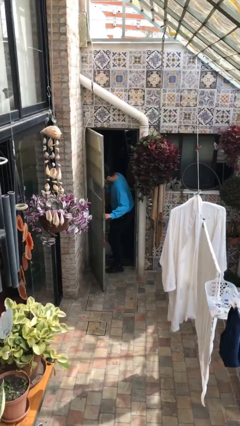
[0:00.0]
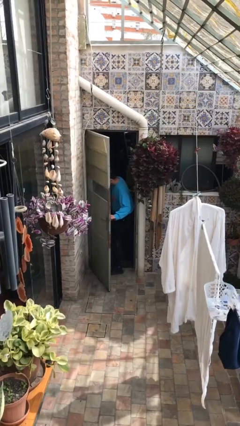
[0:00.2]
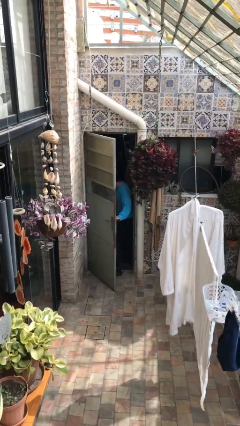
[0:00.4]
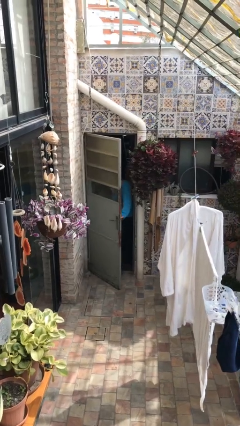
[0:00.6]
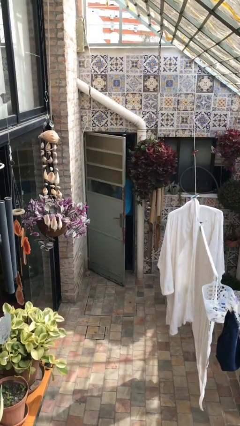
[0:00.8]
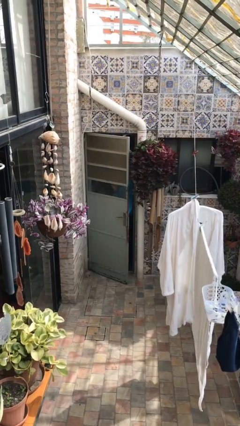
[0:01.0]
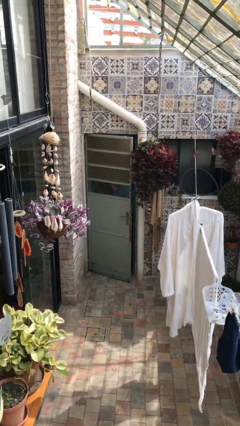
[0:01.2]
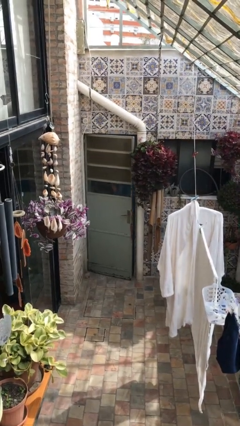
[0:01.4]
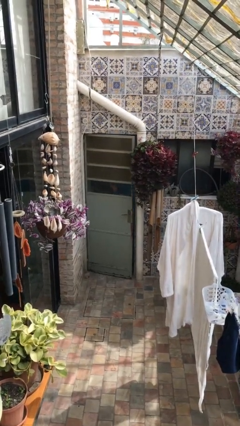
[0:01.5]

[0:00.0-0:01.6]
person closes facility door

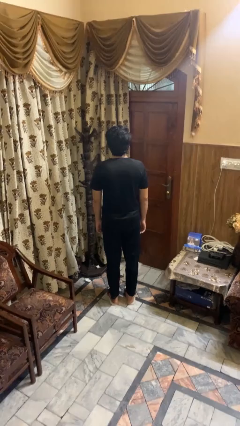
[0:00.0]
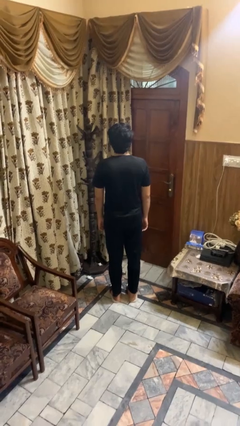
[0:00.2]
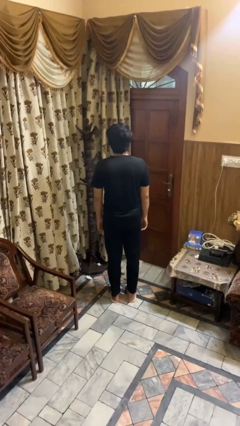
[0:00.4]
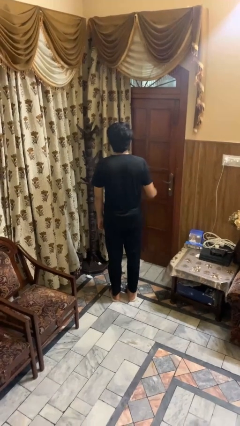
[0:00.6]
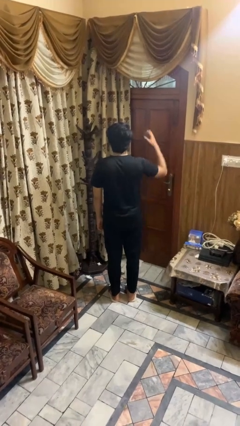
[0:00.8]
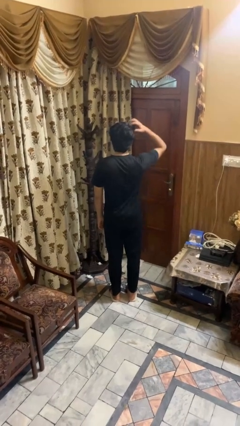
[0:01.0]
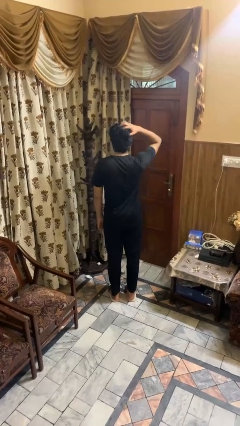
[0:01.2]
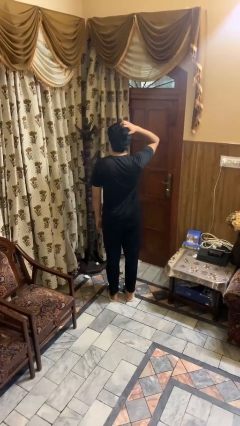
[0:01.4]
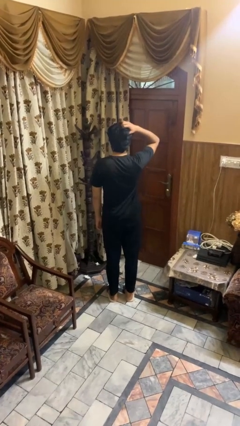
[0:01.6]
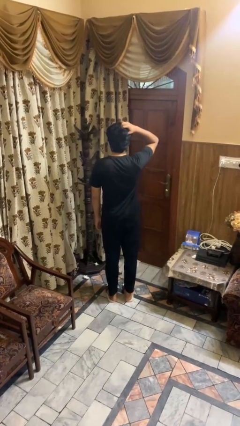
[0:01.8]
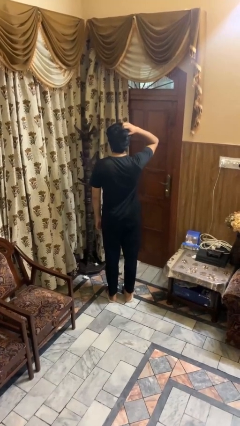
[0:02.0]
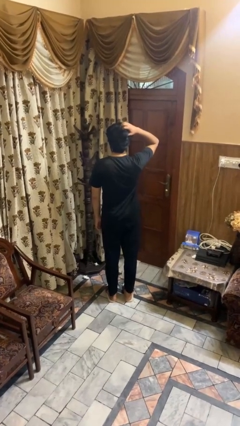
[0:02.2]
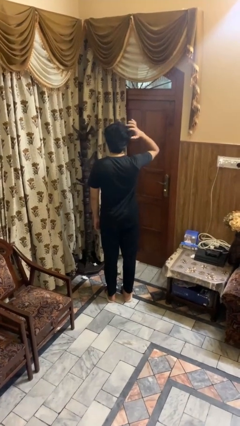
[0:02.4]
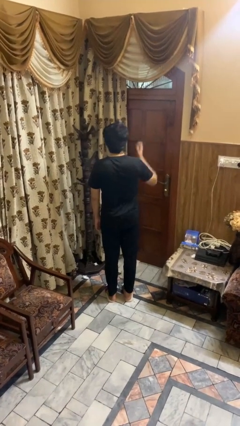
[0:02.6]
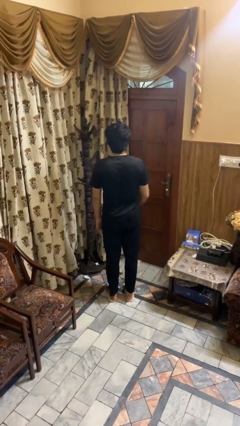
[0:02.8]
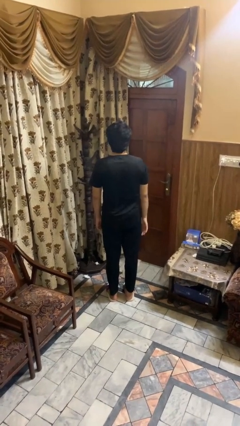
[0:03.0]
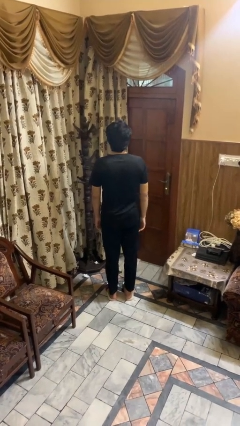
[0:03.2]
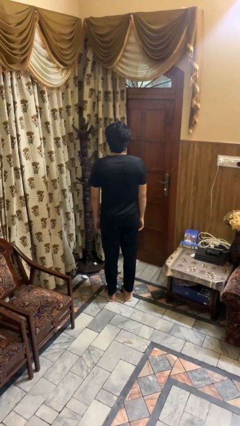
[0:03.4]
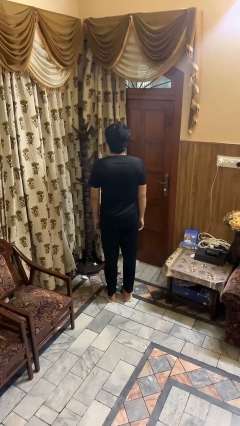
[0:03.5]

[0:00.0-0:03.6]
person scratches face

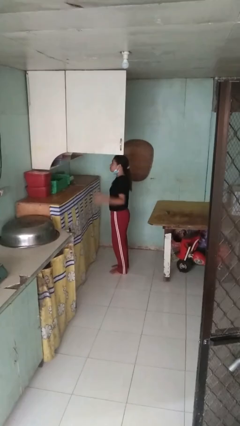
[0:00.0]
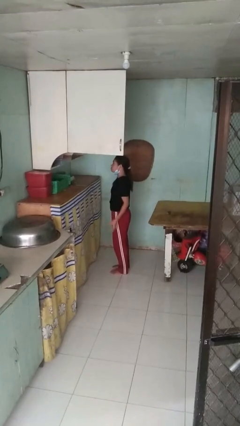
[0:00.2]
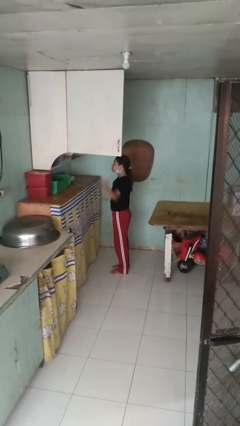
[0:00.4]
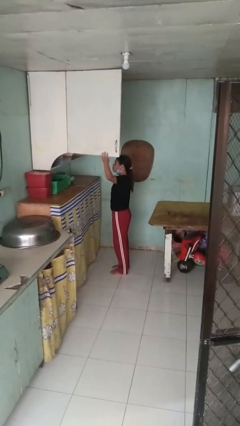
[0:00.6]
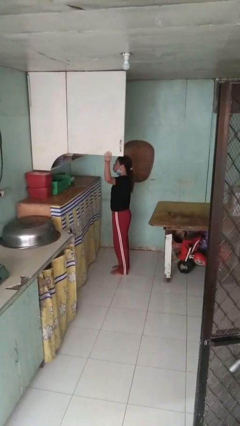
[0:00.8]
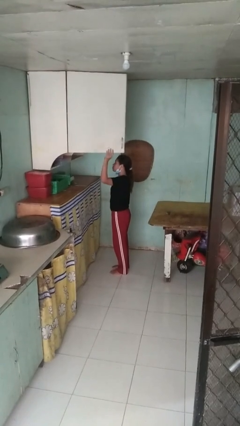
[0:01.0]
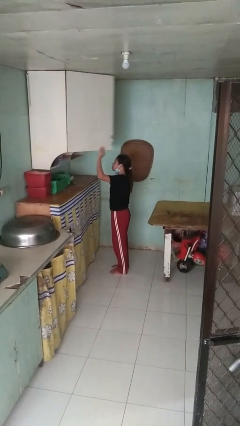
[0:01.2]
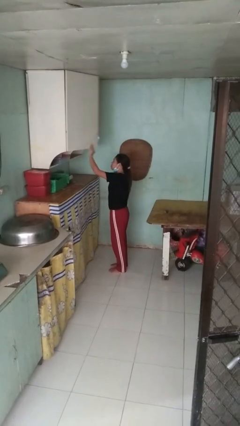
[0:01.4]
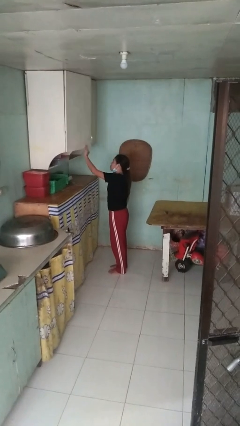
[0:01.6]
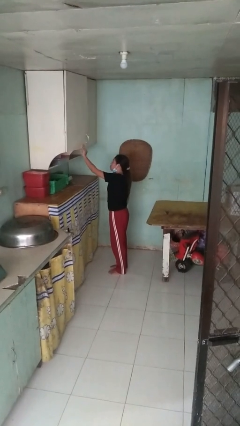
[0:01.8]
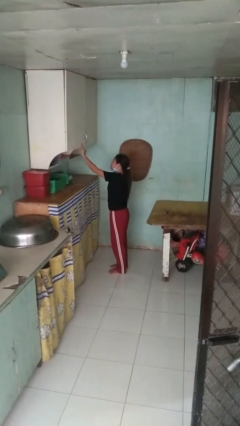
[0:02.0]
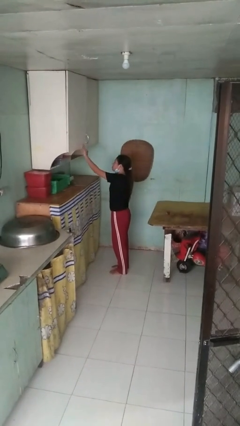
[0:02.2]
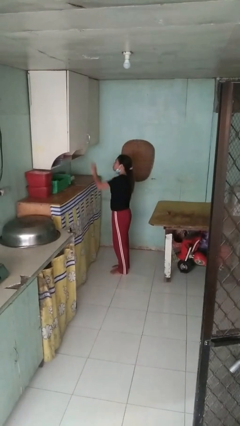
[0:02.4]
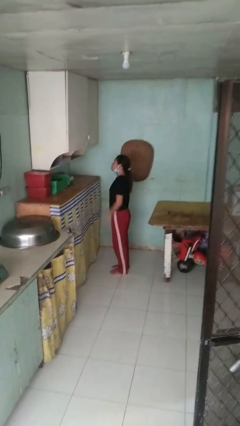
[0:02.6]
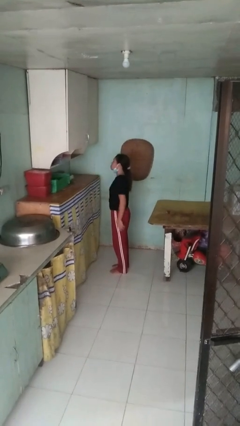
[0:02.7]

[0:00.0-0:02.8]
person closes cabinet

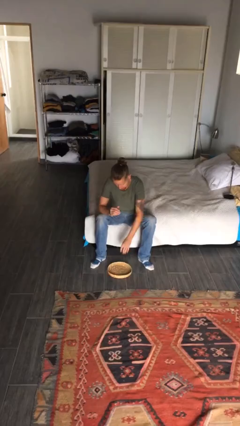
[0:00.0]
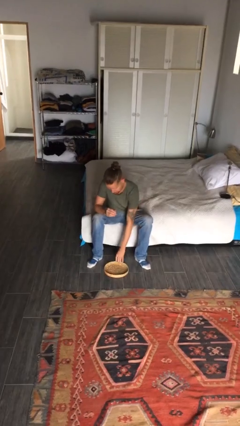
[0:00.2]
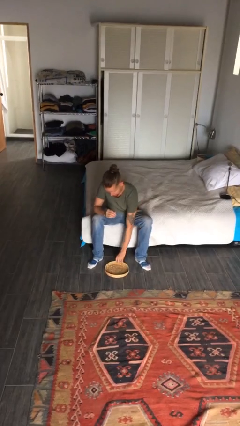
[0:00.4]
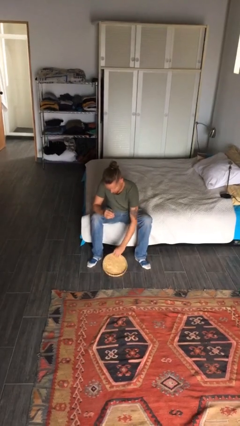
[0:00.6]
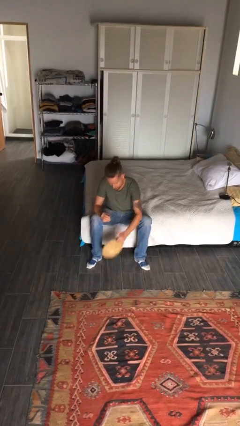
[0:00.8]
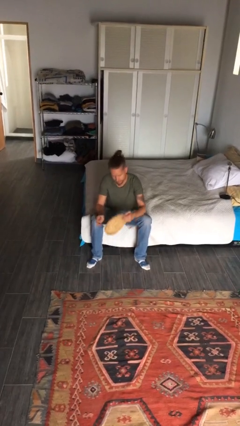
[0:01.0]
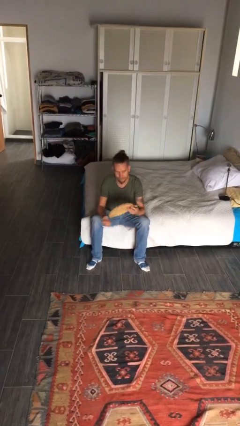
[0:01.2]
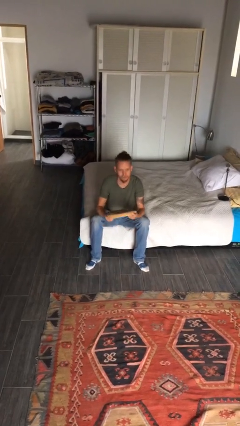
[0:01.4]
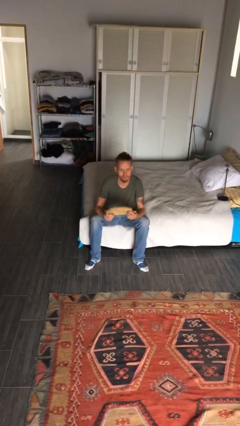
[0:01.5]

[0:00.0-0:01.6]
person picks up object from floor

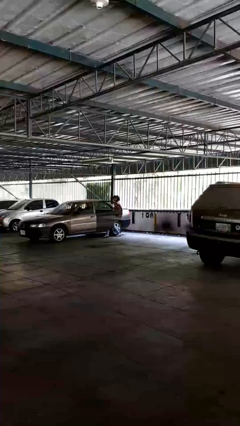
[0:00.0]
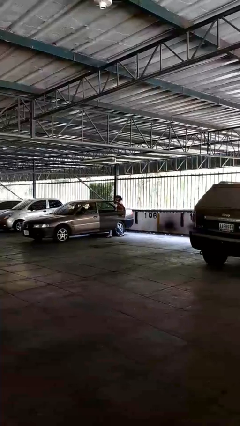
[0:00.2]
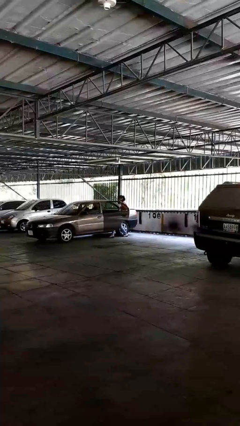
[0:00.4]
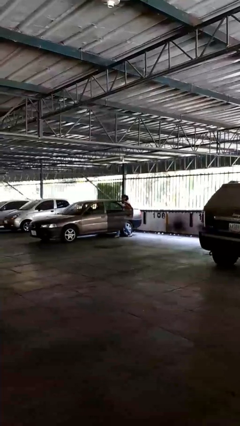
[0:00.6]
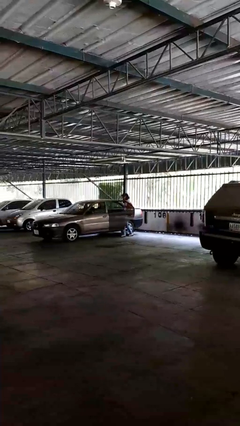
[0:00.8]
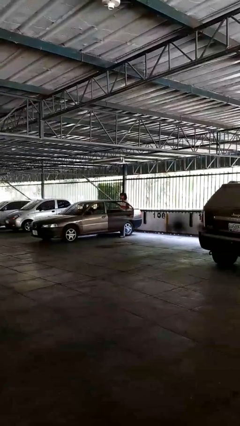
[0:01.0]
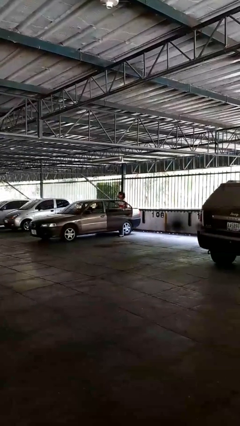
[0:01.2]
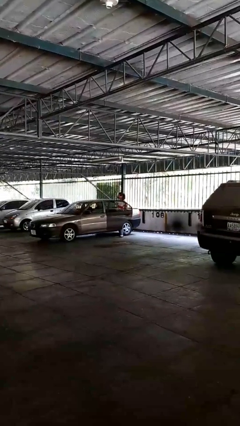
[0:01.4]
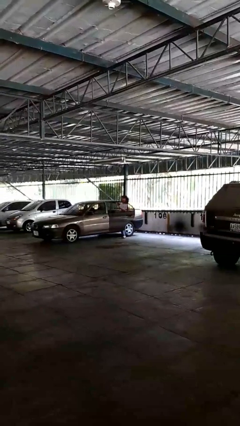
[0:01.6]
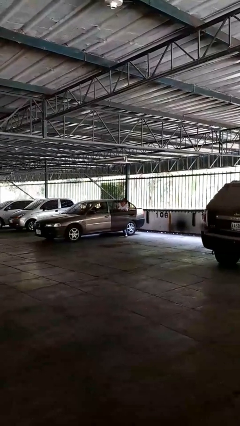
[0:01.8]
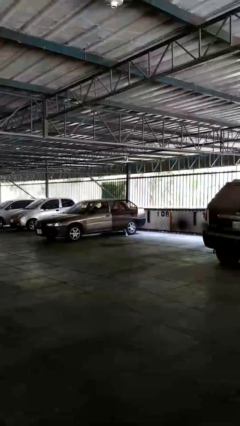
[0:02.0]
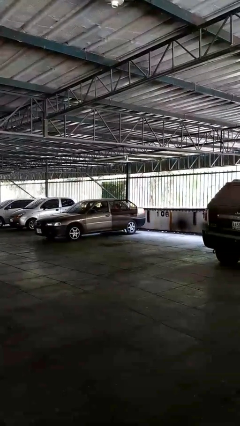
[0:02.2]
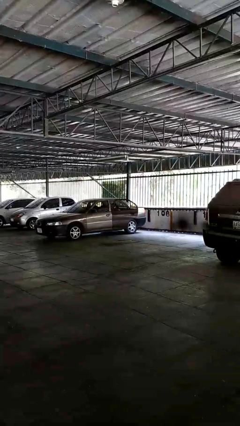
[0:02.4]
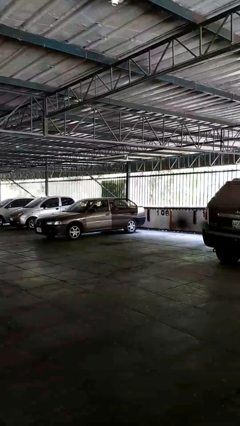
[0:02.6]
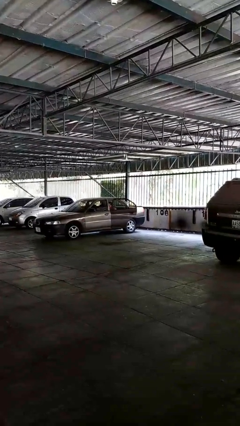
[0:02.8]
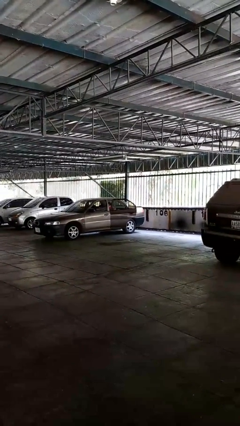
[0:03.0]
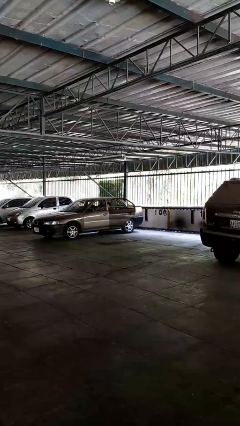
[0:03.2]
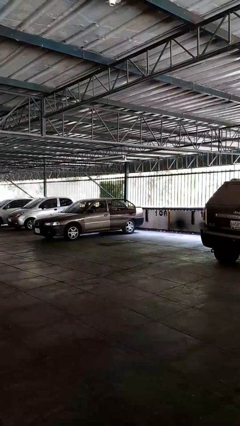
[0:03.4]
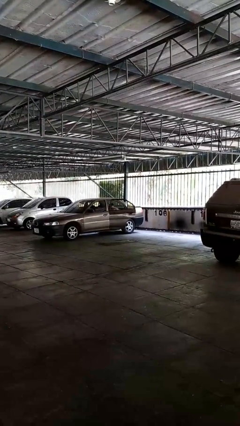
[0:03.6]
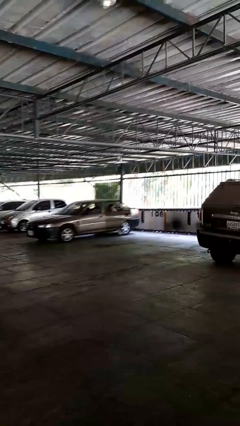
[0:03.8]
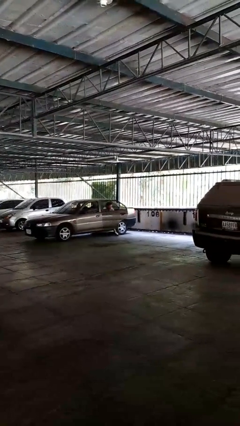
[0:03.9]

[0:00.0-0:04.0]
person enters car

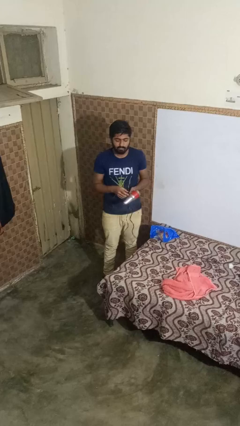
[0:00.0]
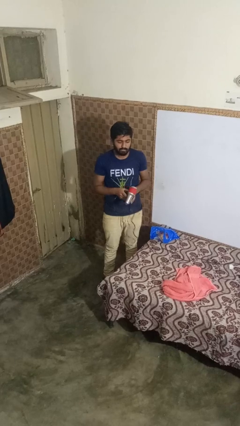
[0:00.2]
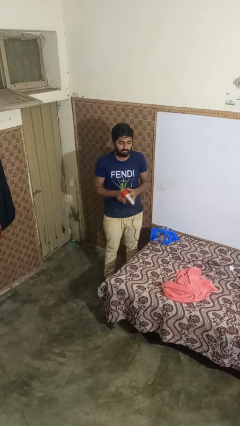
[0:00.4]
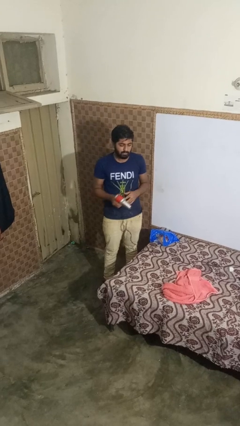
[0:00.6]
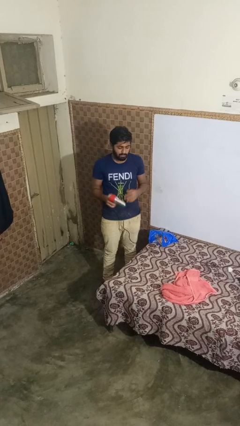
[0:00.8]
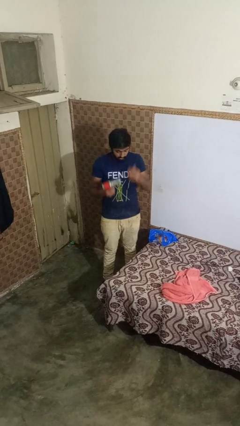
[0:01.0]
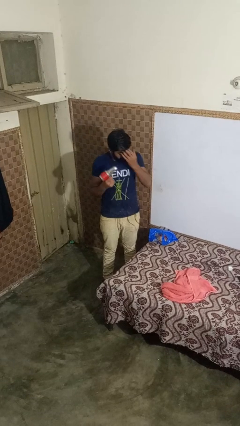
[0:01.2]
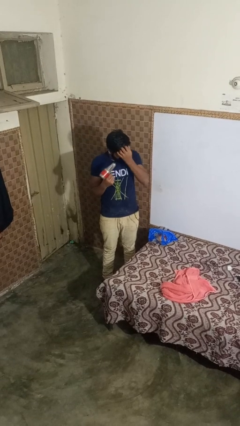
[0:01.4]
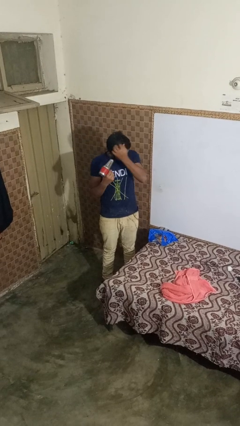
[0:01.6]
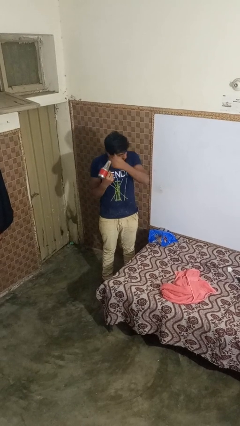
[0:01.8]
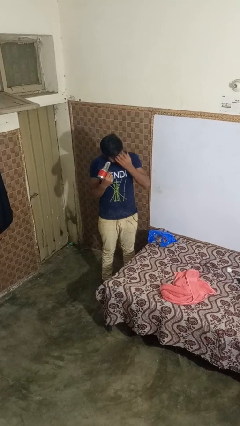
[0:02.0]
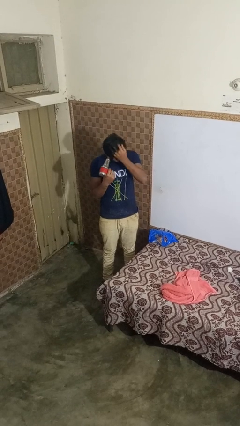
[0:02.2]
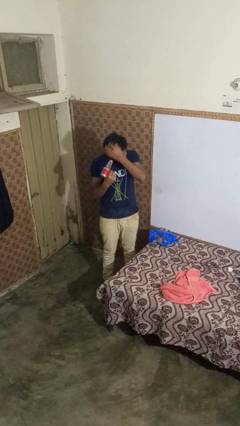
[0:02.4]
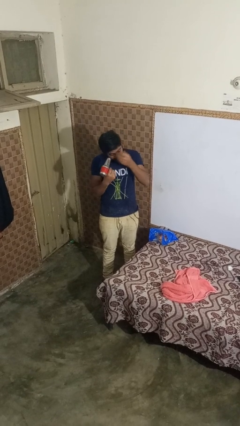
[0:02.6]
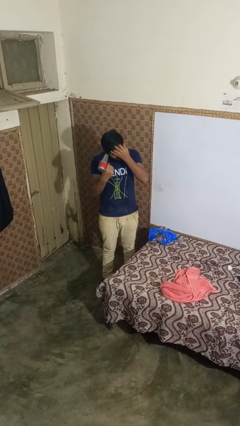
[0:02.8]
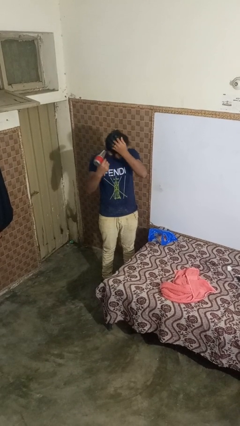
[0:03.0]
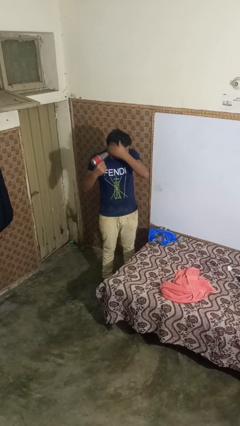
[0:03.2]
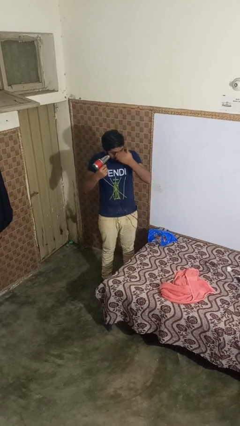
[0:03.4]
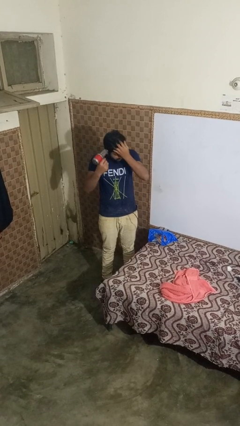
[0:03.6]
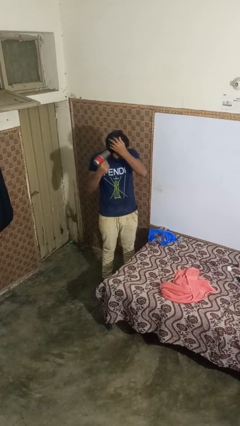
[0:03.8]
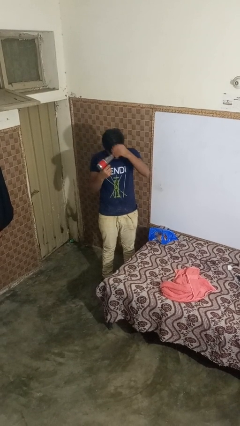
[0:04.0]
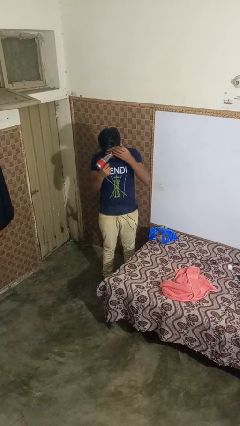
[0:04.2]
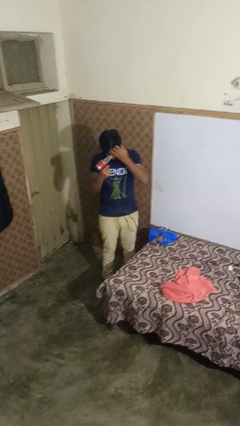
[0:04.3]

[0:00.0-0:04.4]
person dries hair with hairdryer
